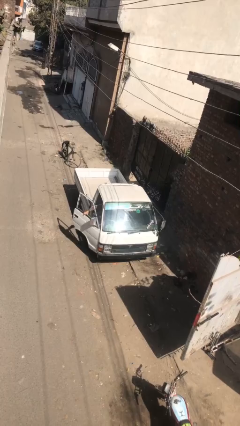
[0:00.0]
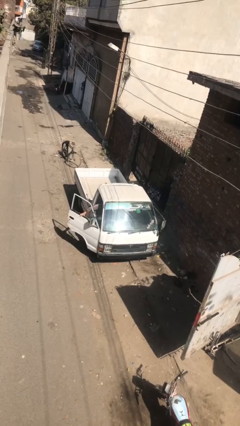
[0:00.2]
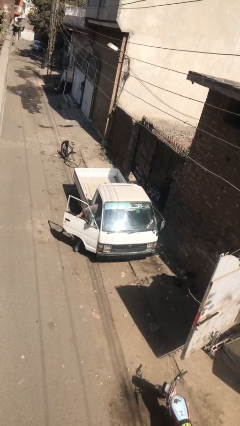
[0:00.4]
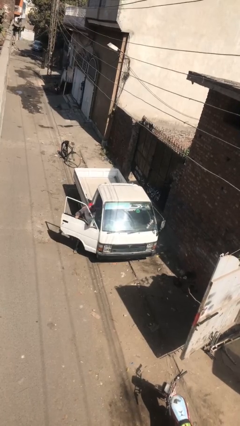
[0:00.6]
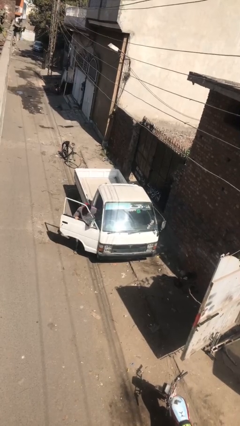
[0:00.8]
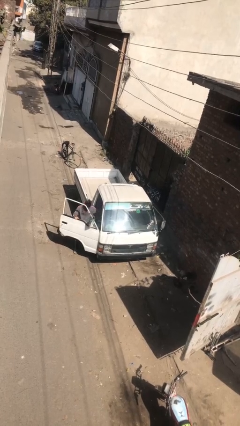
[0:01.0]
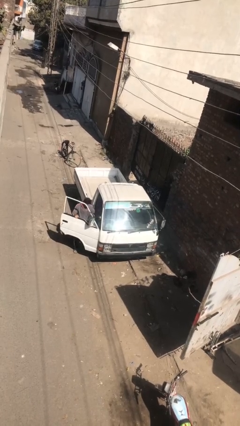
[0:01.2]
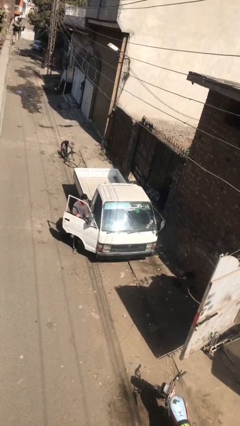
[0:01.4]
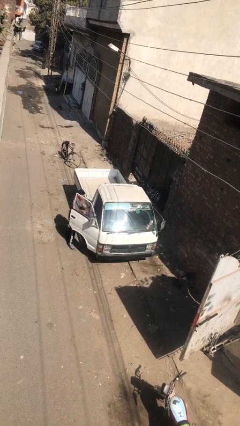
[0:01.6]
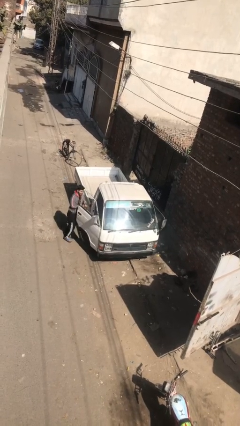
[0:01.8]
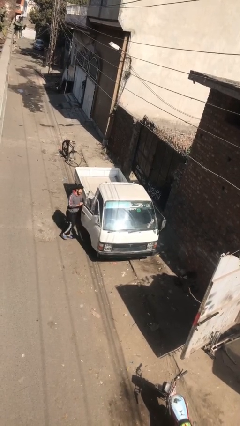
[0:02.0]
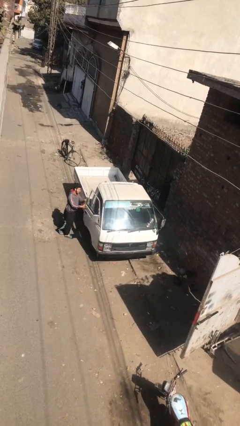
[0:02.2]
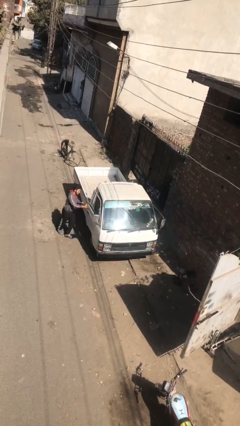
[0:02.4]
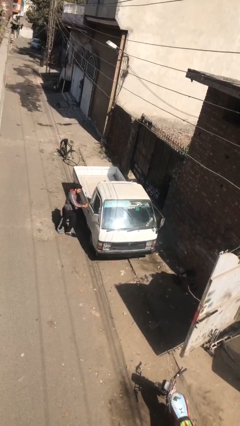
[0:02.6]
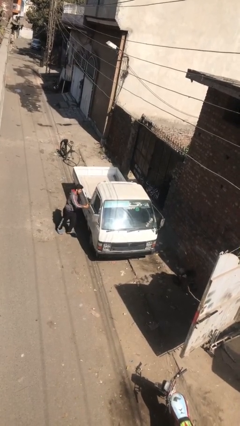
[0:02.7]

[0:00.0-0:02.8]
car drops off person

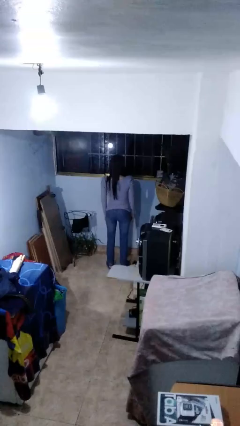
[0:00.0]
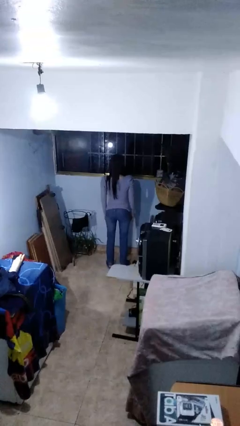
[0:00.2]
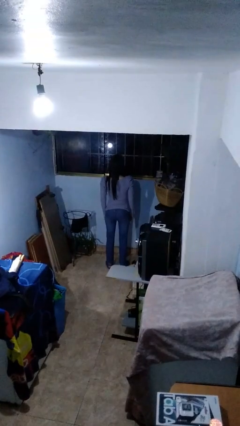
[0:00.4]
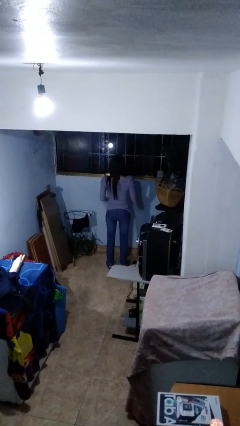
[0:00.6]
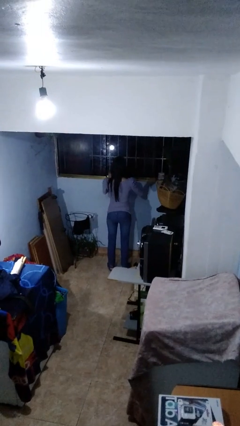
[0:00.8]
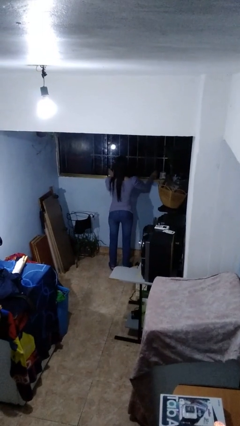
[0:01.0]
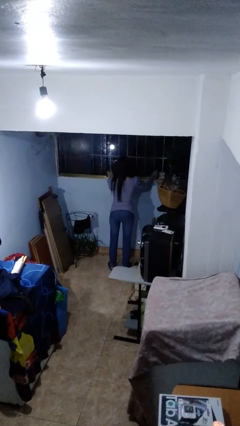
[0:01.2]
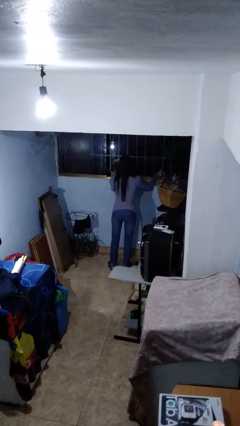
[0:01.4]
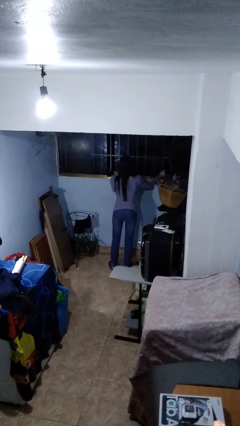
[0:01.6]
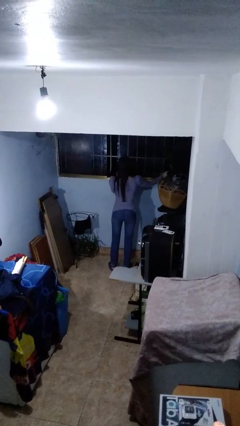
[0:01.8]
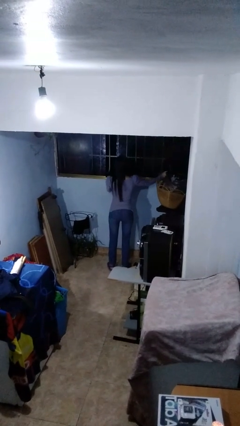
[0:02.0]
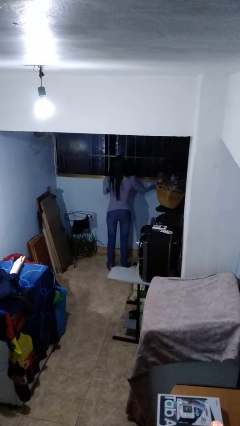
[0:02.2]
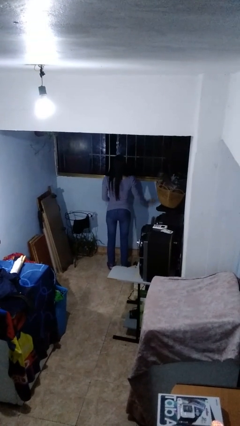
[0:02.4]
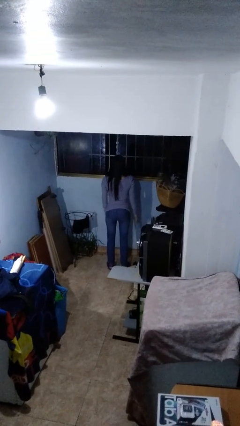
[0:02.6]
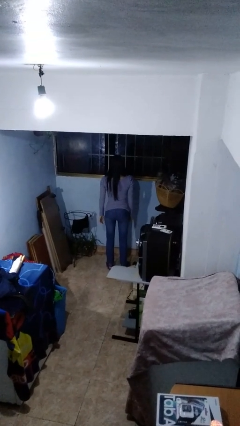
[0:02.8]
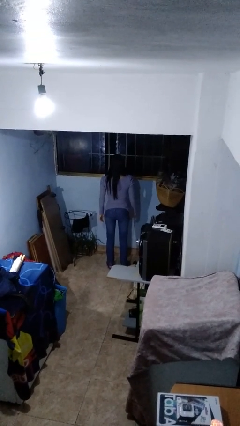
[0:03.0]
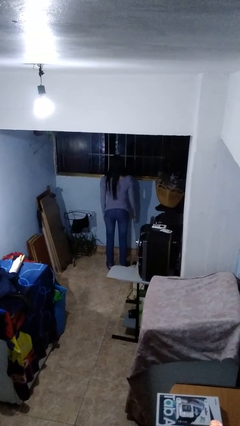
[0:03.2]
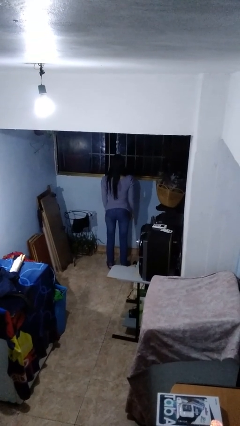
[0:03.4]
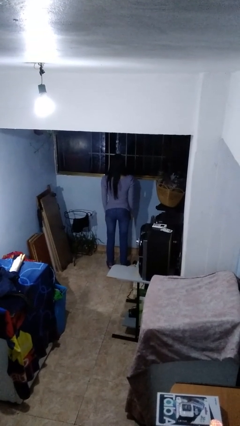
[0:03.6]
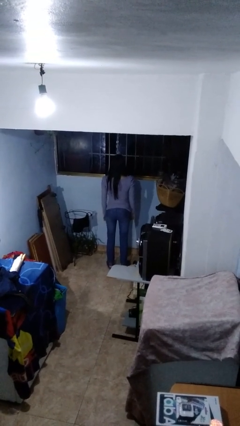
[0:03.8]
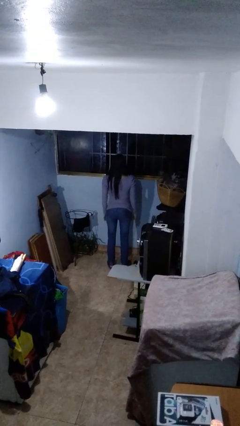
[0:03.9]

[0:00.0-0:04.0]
person opens home window

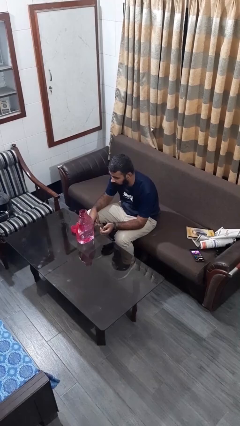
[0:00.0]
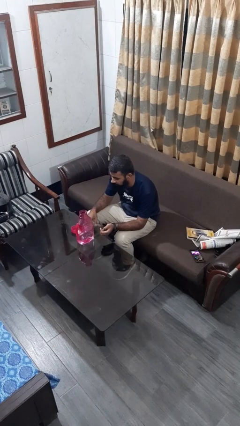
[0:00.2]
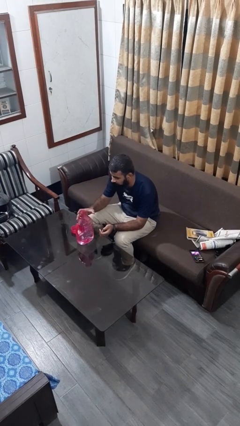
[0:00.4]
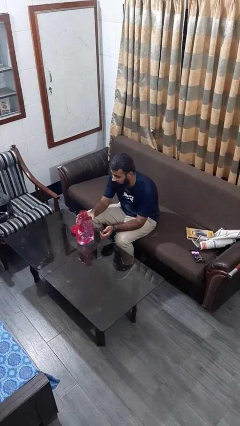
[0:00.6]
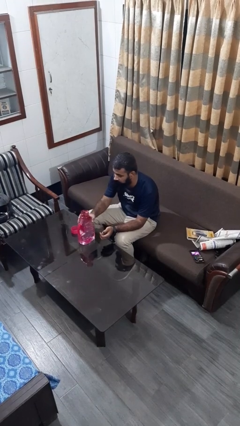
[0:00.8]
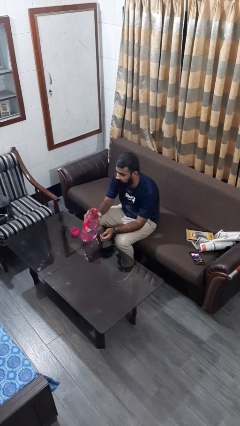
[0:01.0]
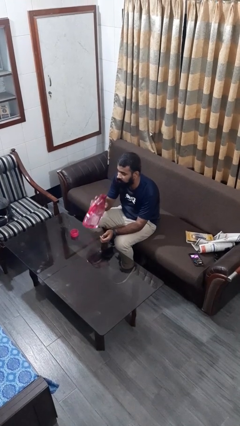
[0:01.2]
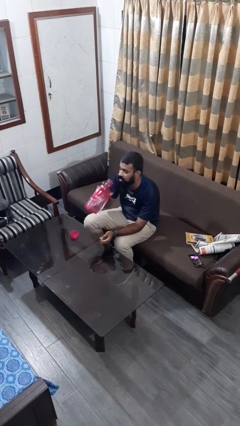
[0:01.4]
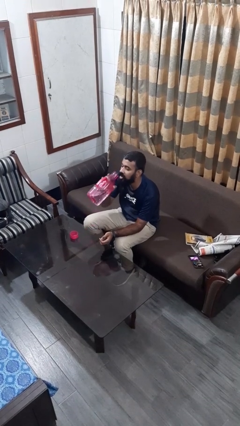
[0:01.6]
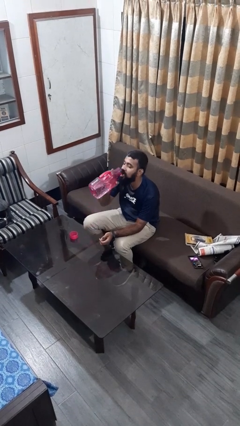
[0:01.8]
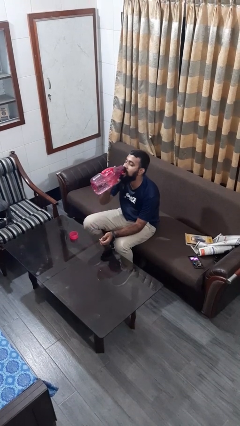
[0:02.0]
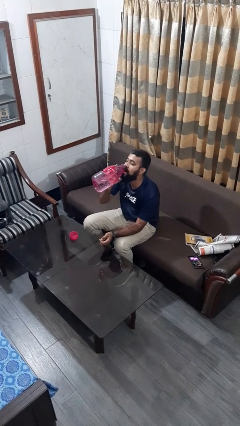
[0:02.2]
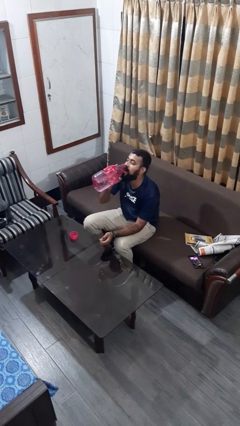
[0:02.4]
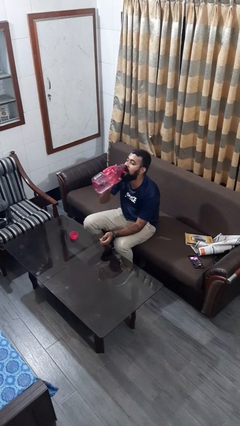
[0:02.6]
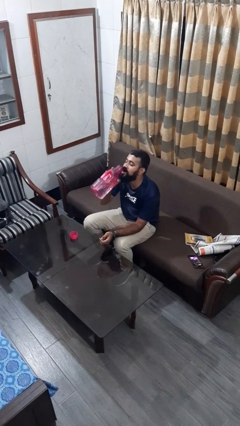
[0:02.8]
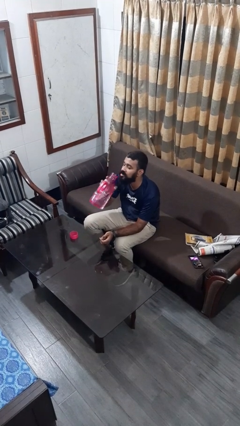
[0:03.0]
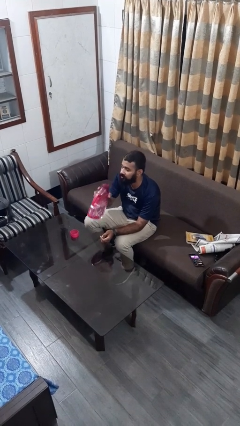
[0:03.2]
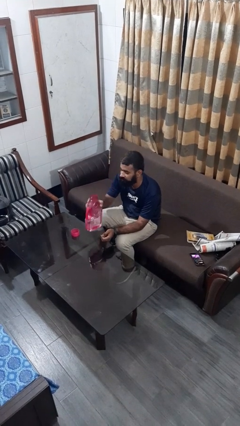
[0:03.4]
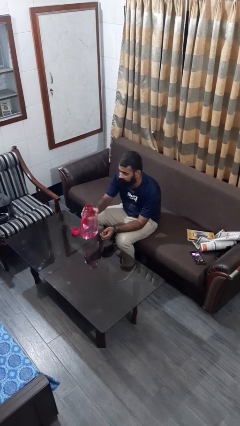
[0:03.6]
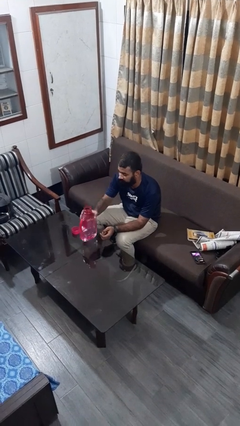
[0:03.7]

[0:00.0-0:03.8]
person drinks from bottle

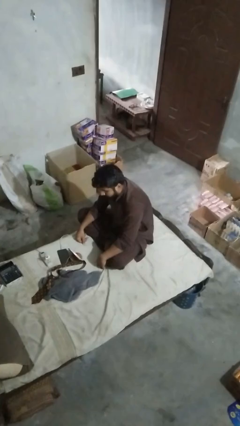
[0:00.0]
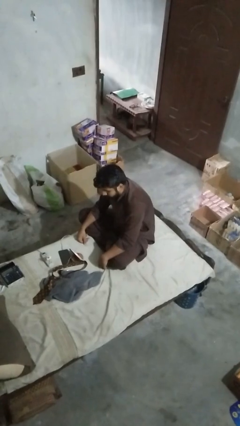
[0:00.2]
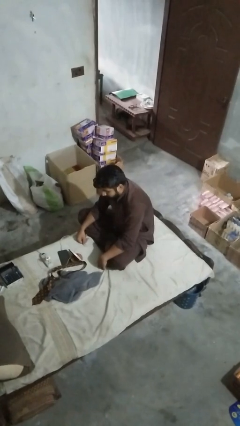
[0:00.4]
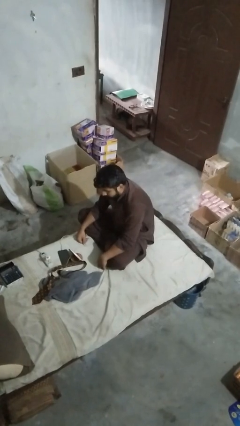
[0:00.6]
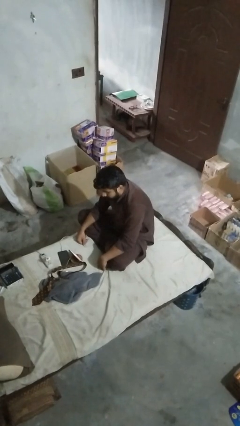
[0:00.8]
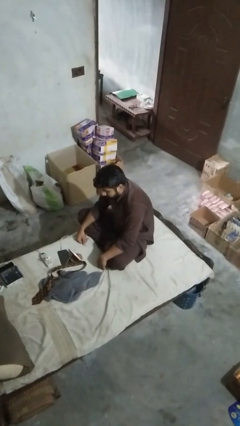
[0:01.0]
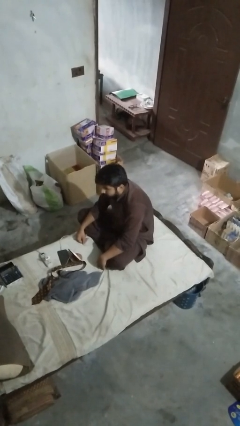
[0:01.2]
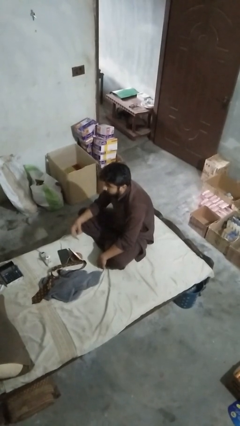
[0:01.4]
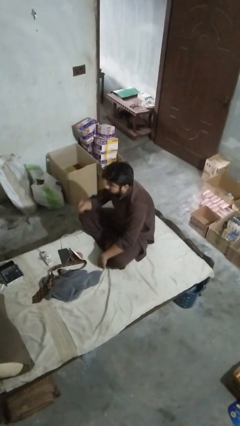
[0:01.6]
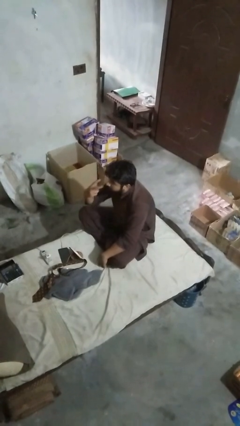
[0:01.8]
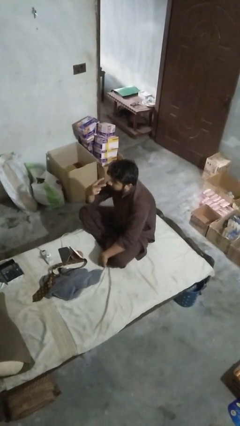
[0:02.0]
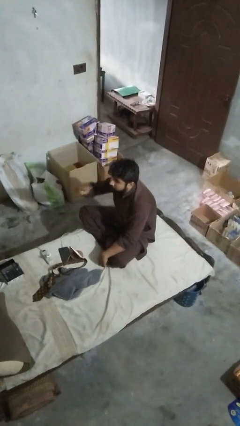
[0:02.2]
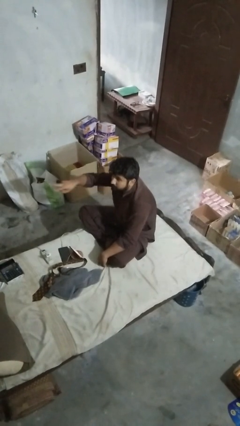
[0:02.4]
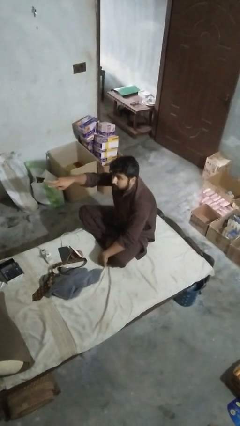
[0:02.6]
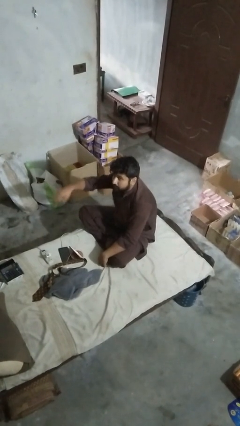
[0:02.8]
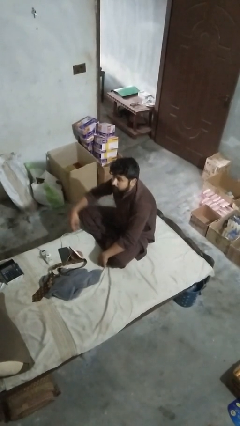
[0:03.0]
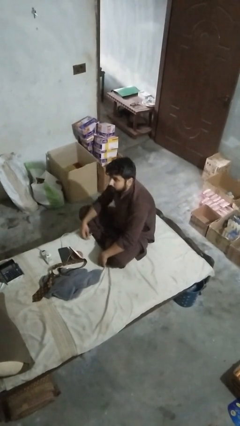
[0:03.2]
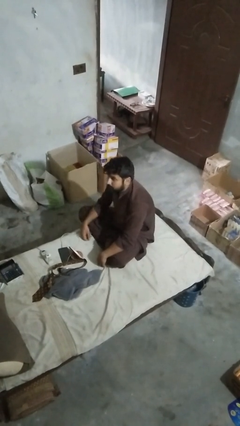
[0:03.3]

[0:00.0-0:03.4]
person gestures watch closely

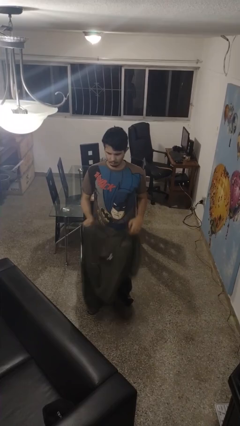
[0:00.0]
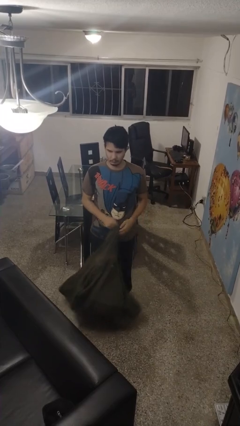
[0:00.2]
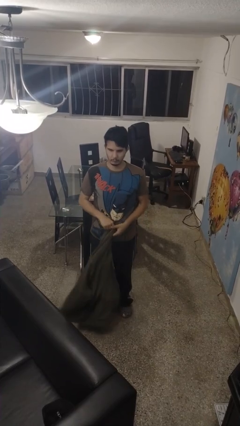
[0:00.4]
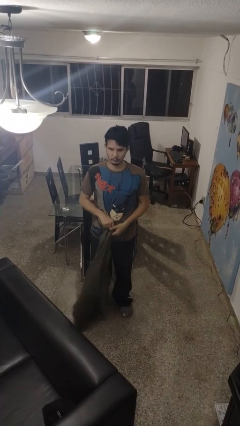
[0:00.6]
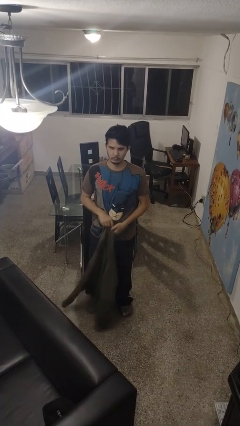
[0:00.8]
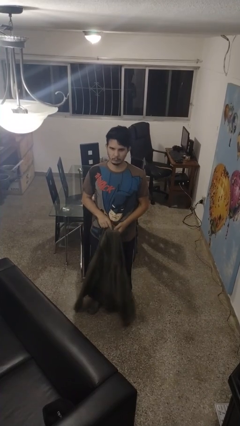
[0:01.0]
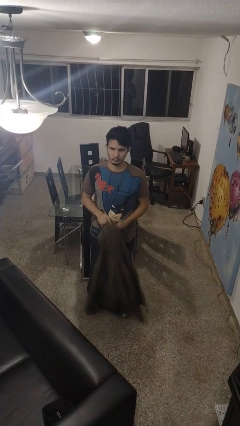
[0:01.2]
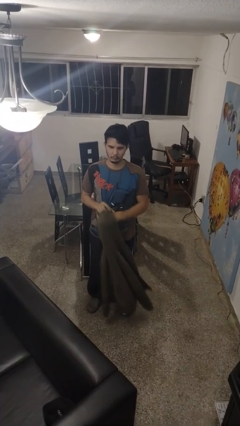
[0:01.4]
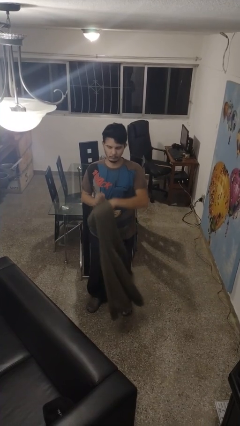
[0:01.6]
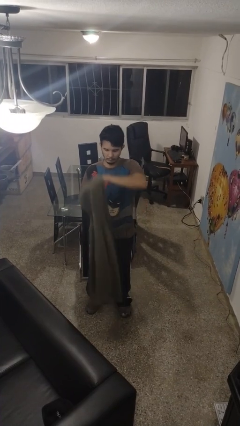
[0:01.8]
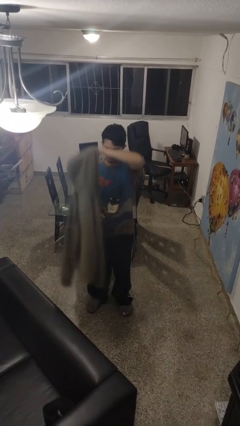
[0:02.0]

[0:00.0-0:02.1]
person puts on jacket

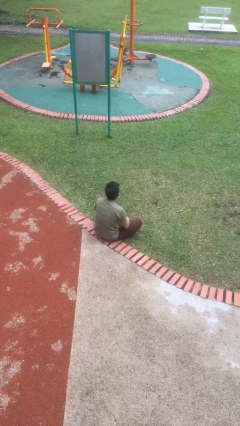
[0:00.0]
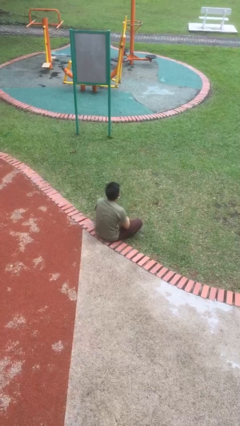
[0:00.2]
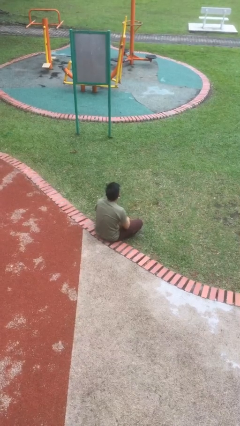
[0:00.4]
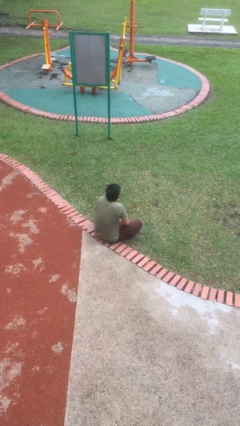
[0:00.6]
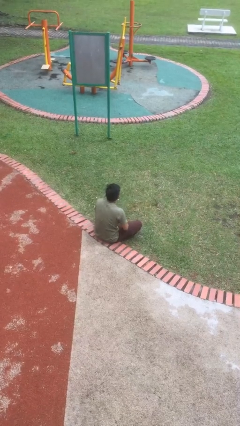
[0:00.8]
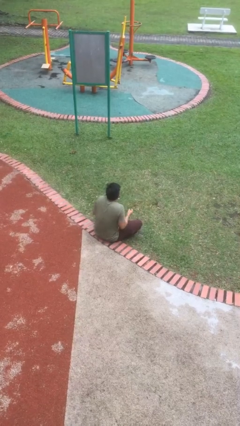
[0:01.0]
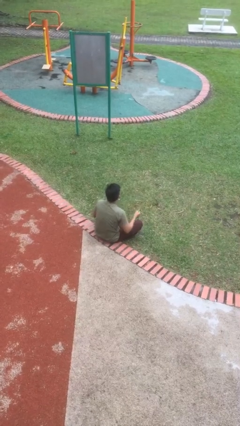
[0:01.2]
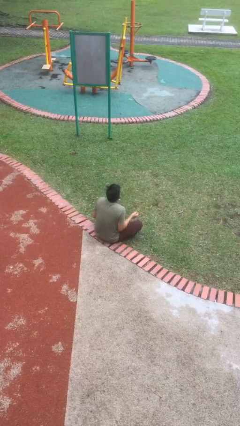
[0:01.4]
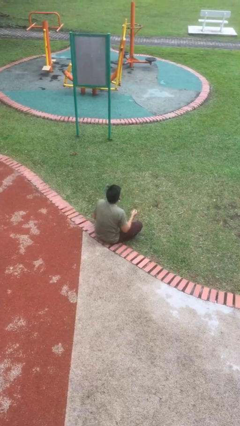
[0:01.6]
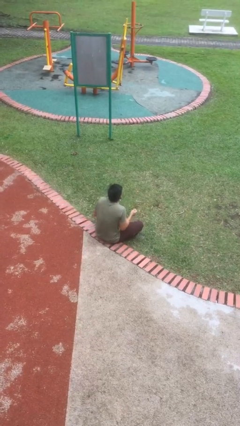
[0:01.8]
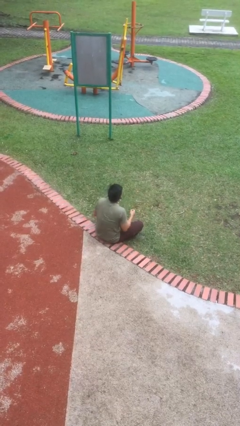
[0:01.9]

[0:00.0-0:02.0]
person shrugs
